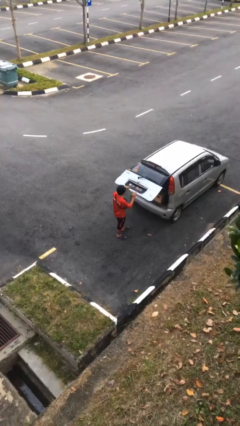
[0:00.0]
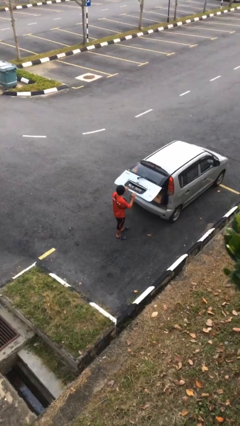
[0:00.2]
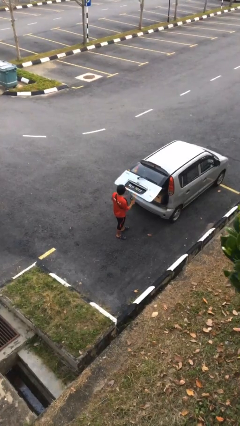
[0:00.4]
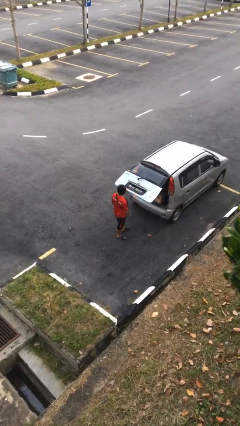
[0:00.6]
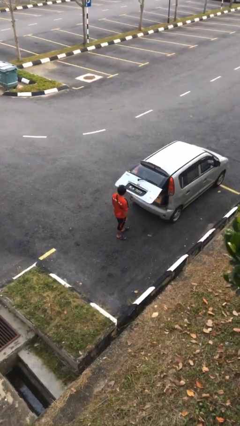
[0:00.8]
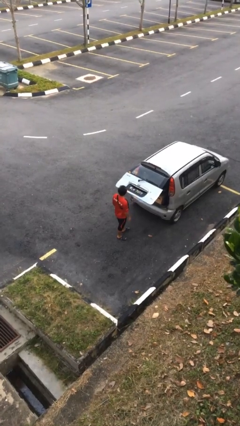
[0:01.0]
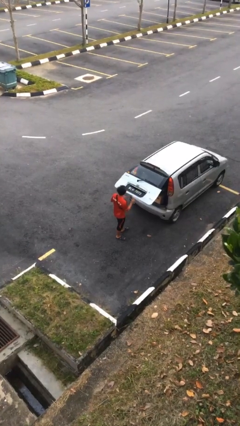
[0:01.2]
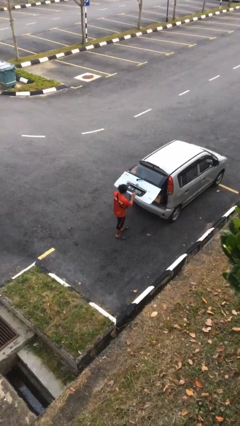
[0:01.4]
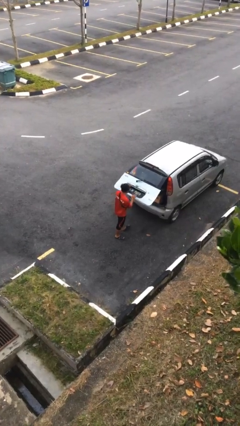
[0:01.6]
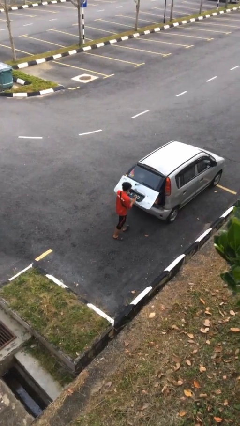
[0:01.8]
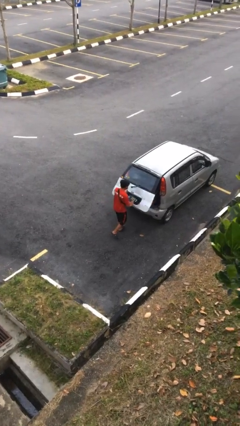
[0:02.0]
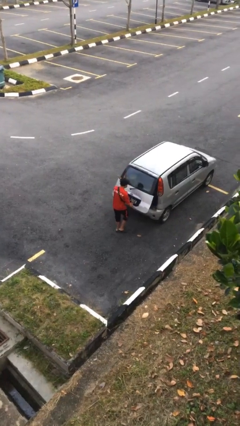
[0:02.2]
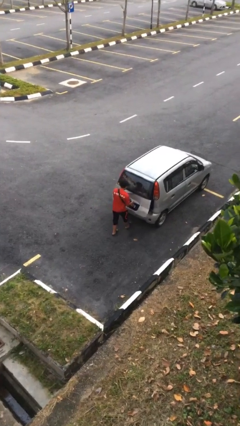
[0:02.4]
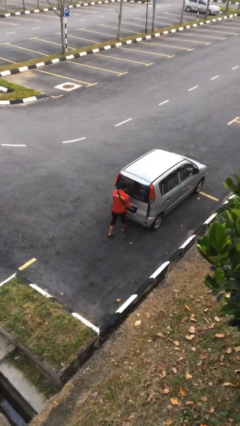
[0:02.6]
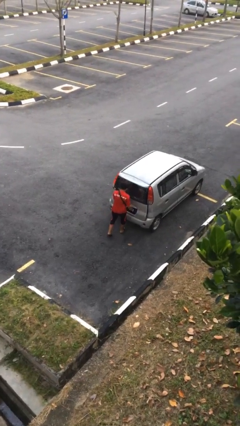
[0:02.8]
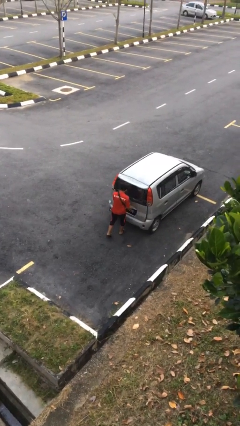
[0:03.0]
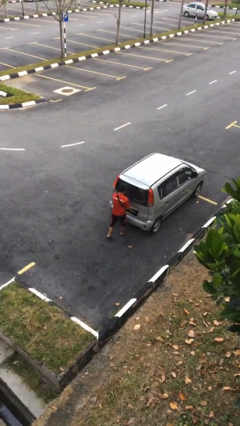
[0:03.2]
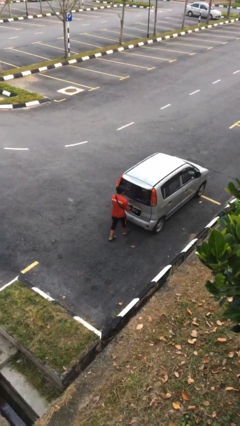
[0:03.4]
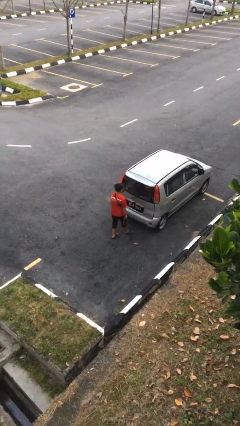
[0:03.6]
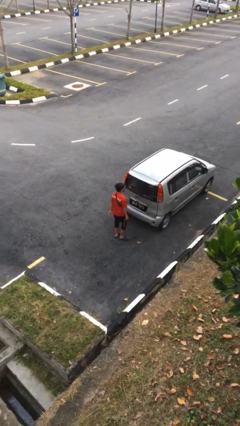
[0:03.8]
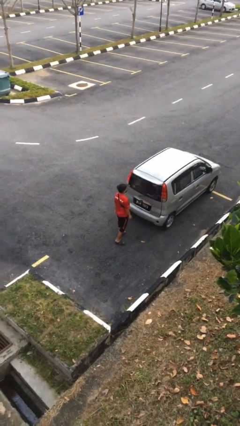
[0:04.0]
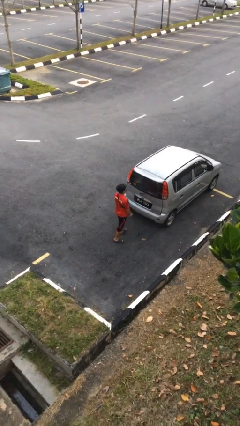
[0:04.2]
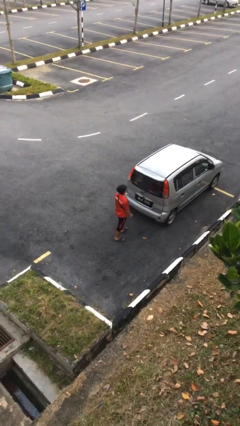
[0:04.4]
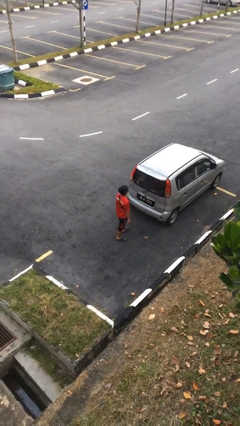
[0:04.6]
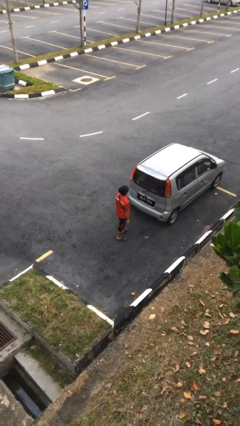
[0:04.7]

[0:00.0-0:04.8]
person closes car trunk

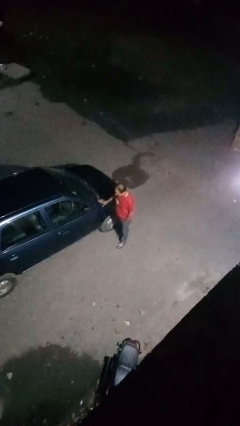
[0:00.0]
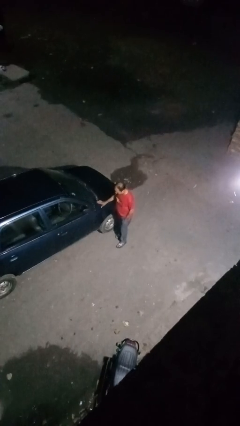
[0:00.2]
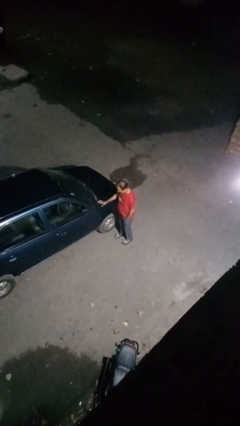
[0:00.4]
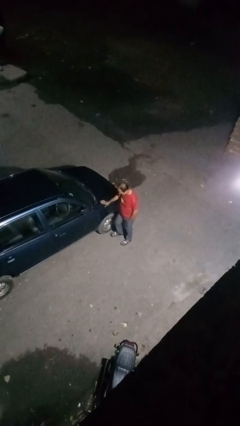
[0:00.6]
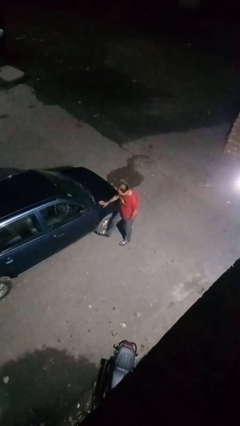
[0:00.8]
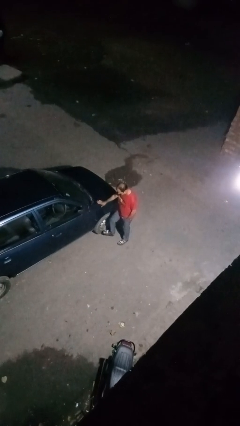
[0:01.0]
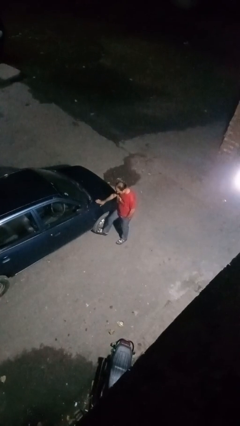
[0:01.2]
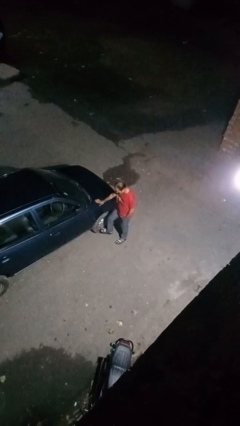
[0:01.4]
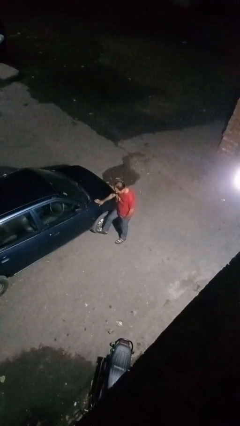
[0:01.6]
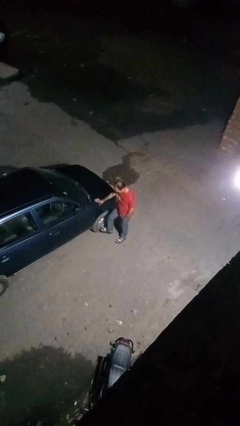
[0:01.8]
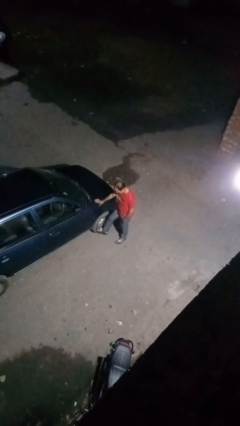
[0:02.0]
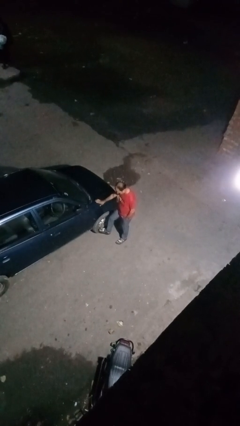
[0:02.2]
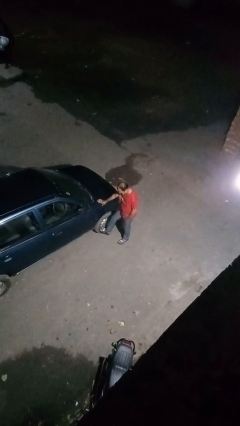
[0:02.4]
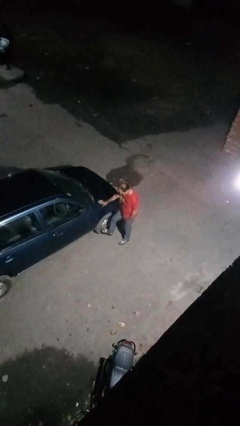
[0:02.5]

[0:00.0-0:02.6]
person kicks car tires

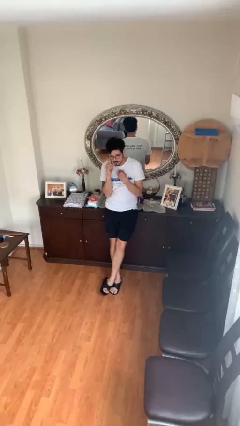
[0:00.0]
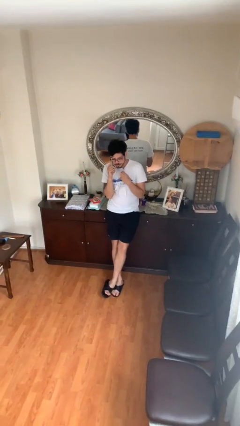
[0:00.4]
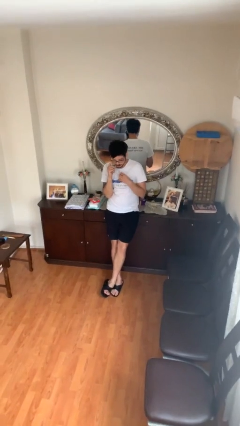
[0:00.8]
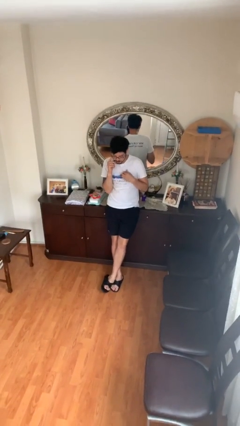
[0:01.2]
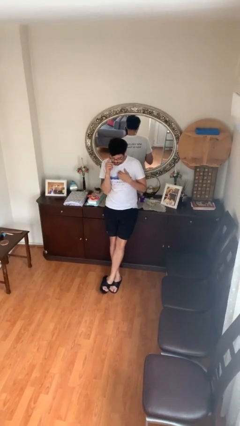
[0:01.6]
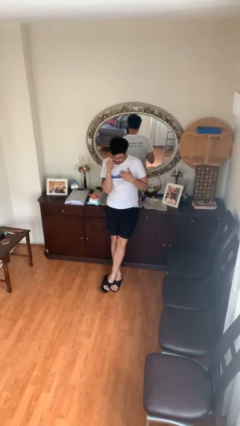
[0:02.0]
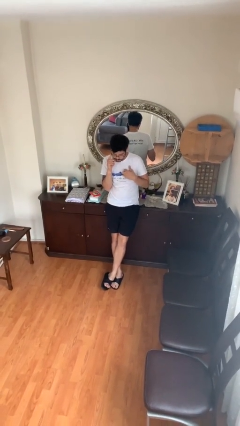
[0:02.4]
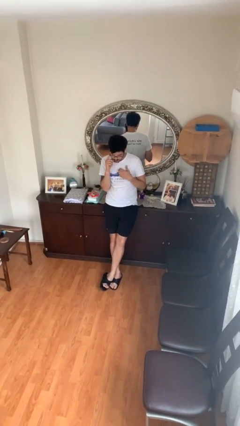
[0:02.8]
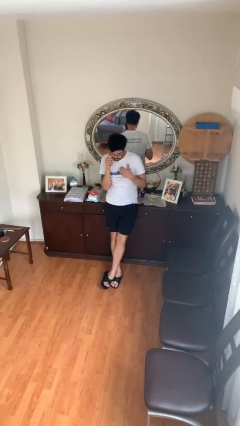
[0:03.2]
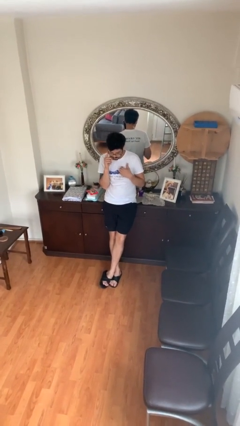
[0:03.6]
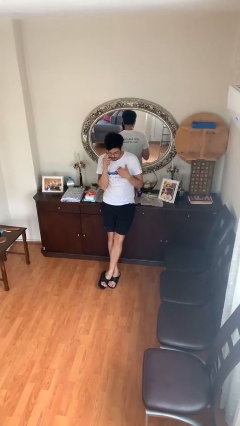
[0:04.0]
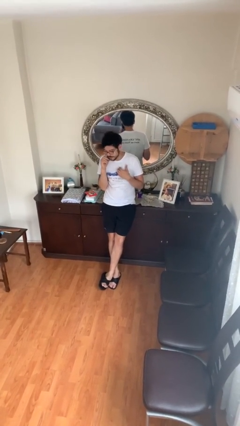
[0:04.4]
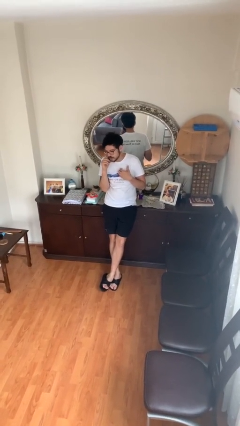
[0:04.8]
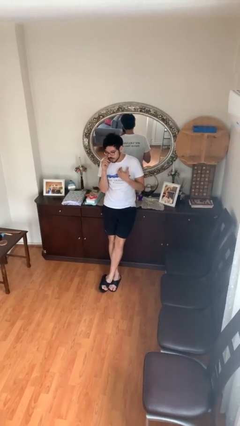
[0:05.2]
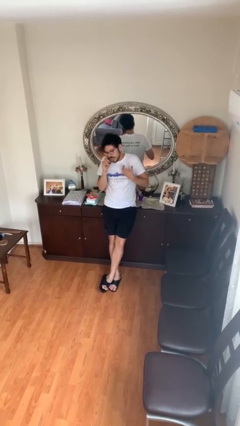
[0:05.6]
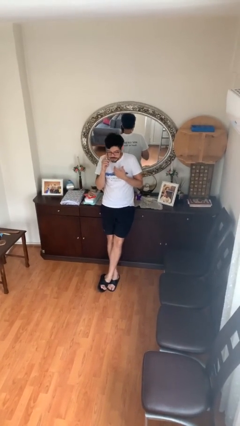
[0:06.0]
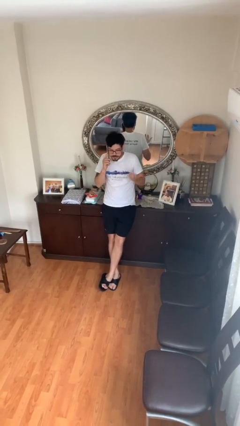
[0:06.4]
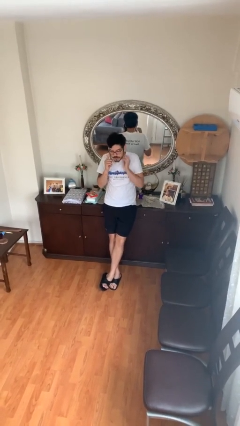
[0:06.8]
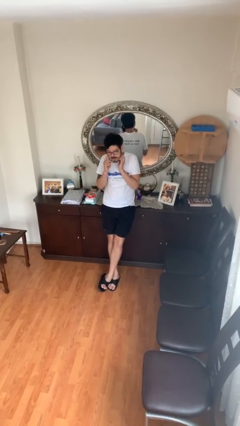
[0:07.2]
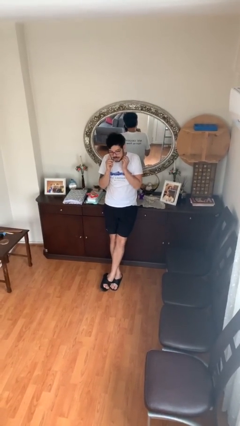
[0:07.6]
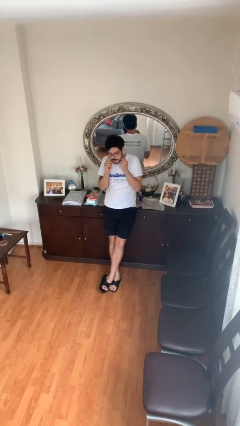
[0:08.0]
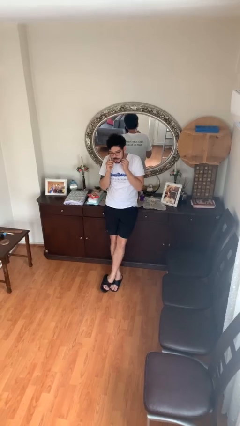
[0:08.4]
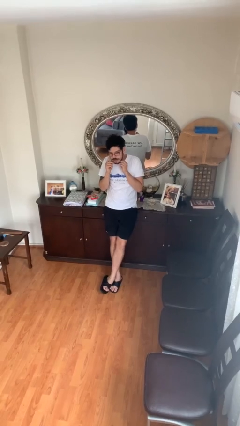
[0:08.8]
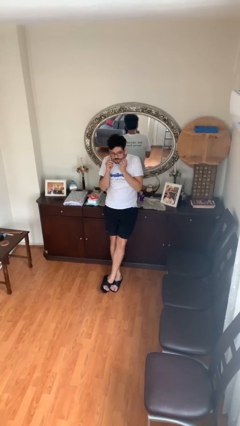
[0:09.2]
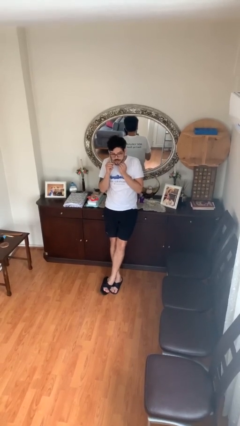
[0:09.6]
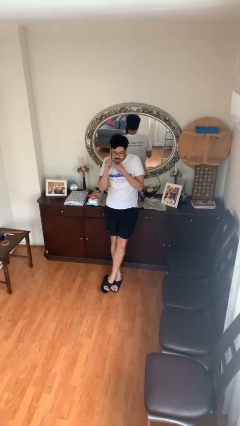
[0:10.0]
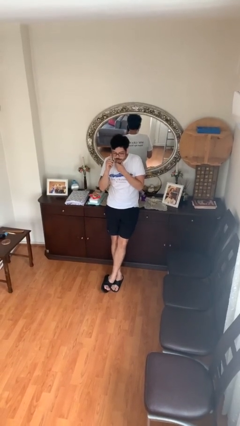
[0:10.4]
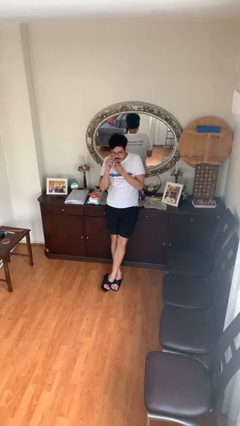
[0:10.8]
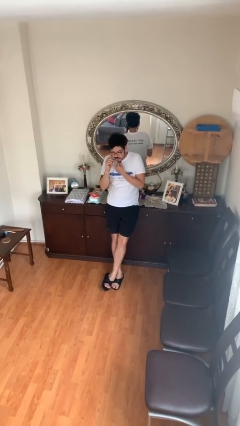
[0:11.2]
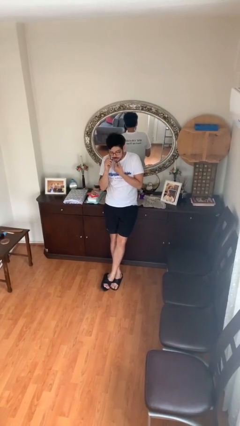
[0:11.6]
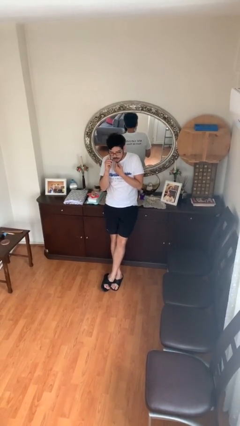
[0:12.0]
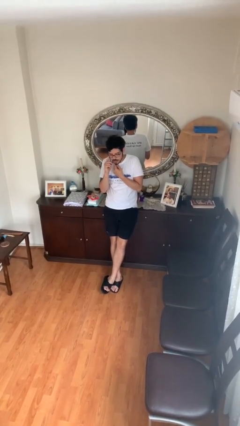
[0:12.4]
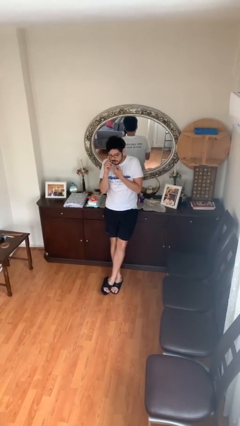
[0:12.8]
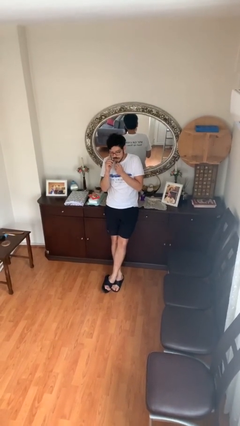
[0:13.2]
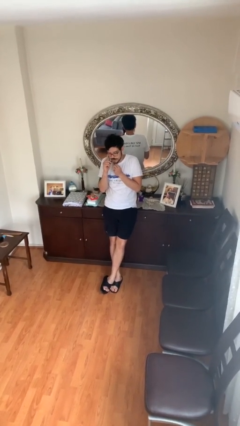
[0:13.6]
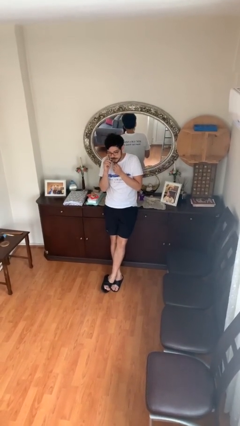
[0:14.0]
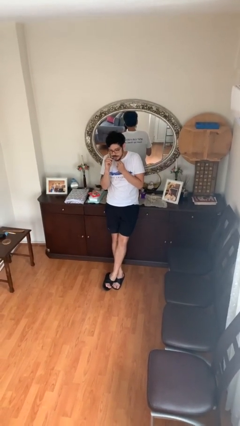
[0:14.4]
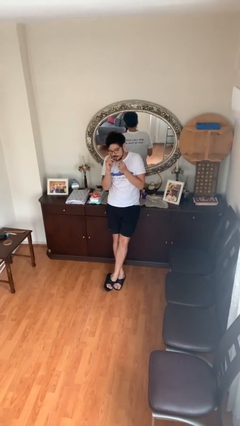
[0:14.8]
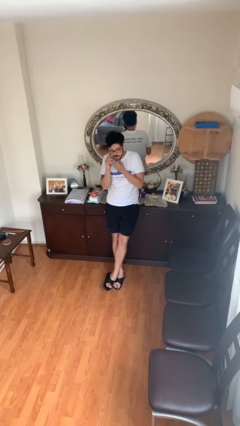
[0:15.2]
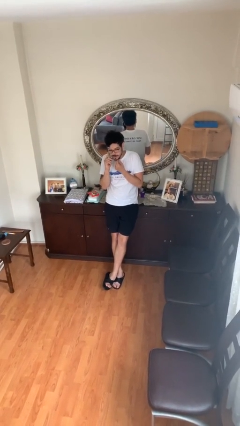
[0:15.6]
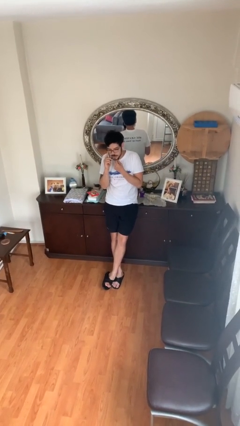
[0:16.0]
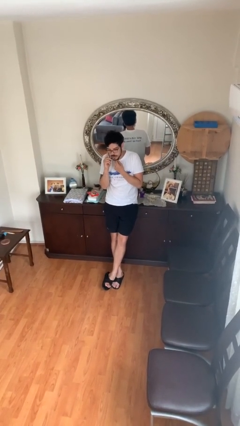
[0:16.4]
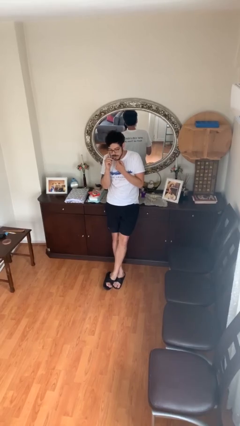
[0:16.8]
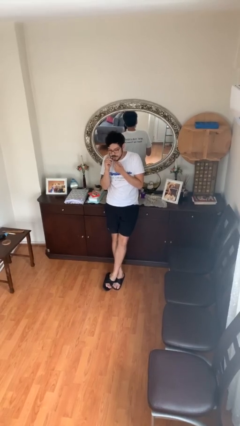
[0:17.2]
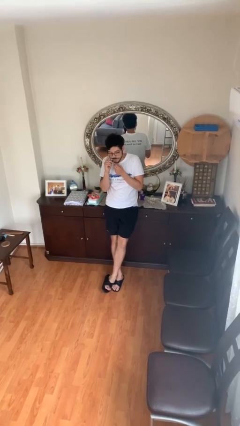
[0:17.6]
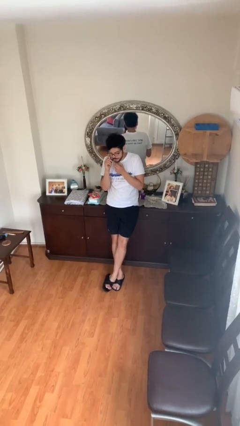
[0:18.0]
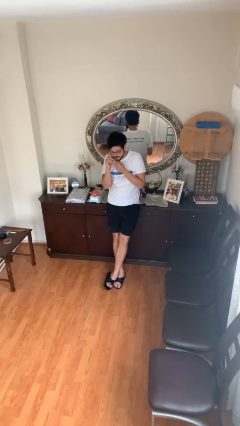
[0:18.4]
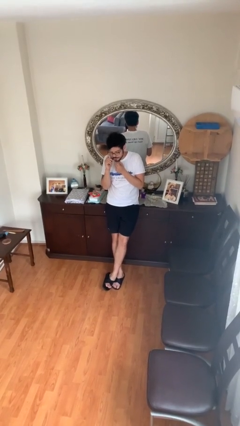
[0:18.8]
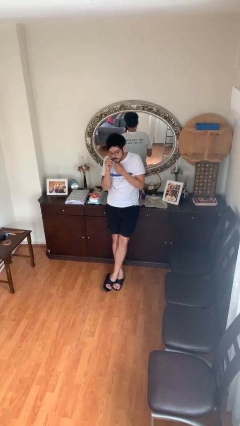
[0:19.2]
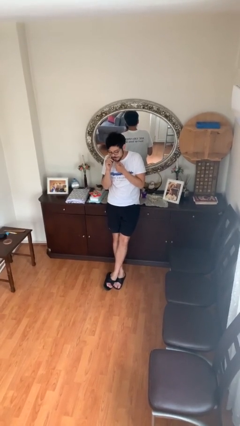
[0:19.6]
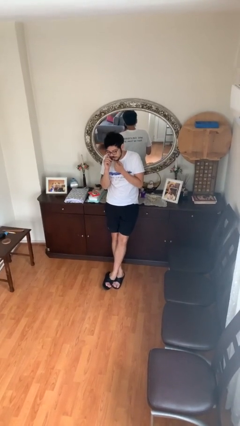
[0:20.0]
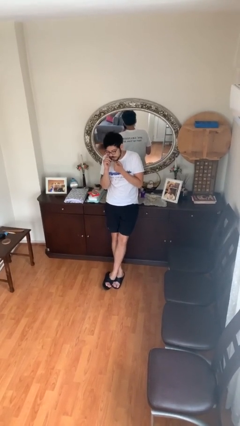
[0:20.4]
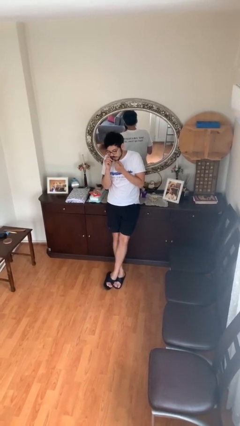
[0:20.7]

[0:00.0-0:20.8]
person talks on phone

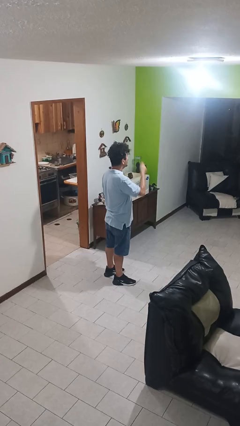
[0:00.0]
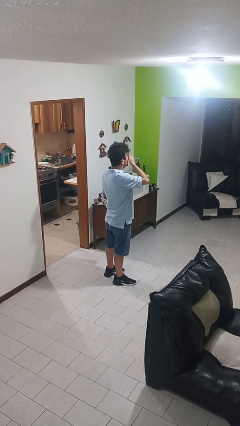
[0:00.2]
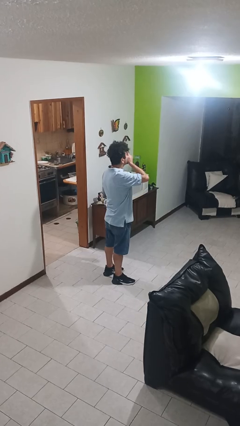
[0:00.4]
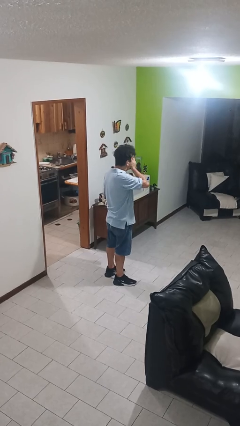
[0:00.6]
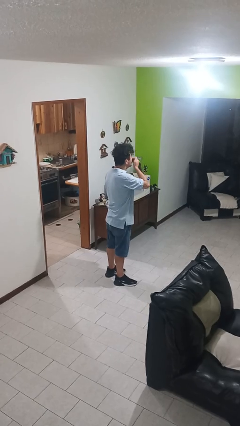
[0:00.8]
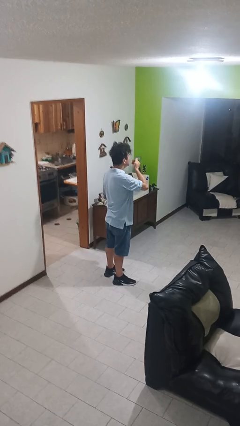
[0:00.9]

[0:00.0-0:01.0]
person sneezes into hand
